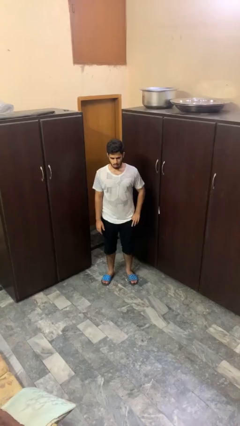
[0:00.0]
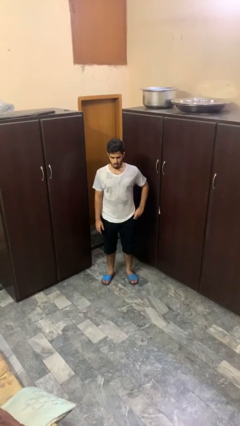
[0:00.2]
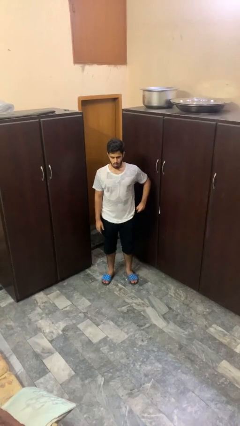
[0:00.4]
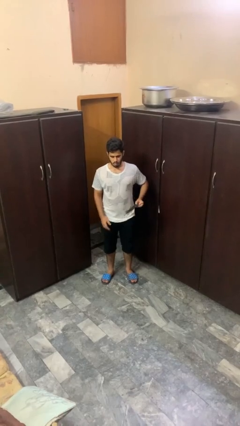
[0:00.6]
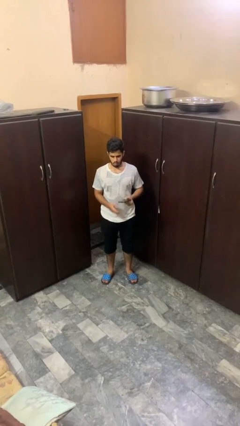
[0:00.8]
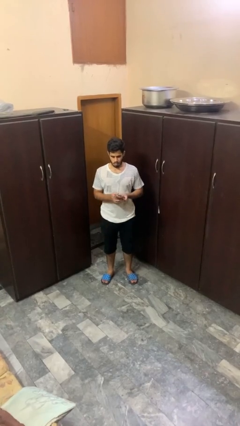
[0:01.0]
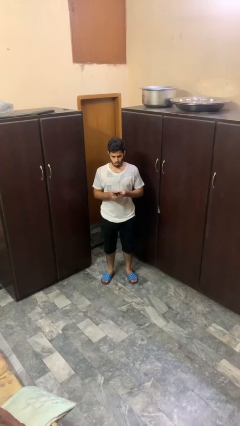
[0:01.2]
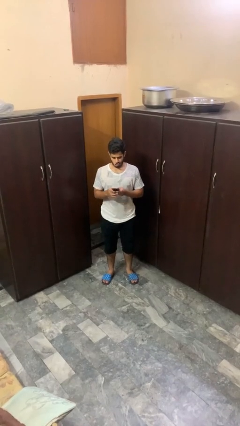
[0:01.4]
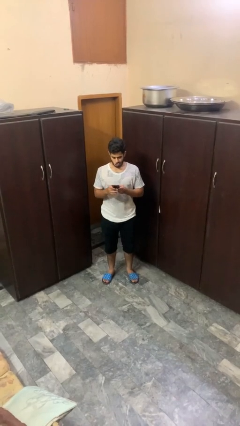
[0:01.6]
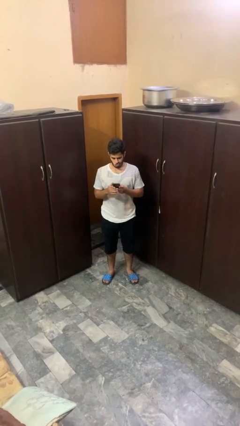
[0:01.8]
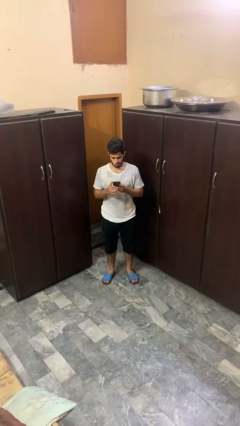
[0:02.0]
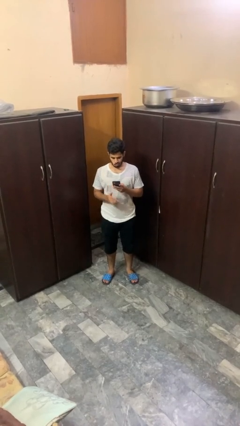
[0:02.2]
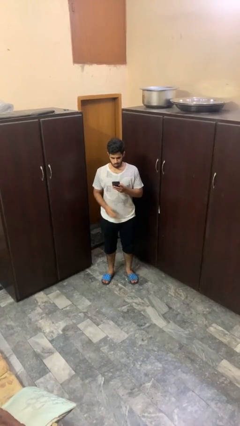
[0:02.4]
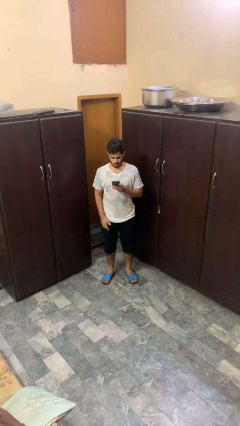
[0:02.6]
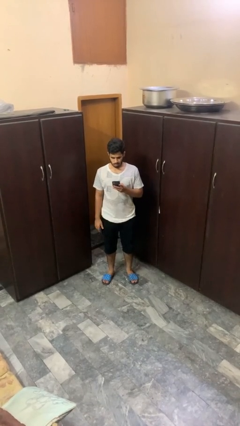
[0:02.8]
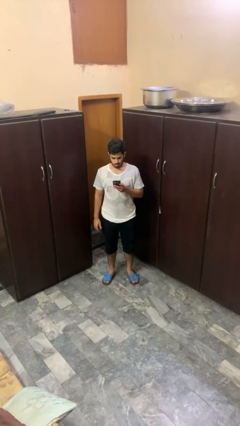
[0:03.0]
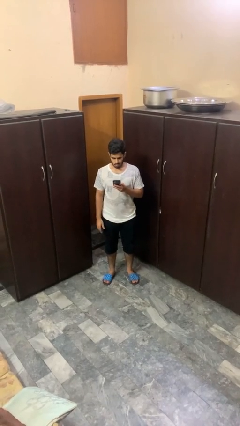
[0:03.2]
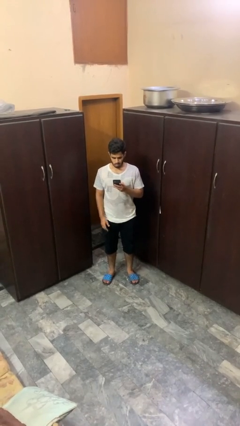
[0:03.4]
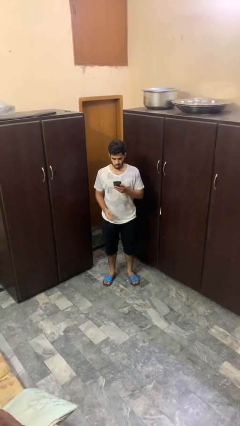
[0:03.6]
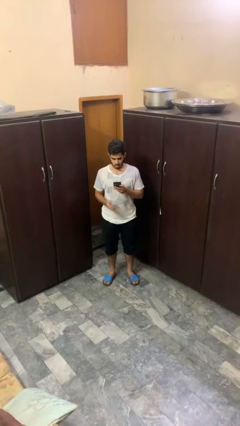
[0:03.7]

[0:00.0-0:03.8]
person takes phone from pocket

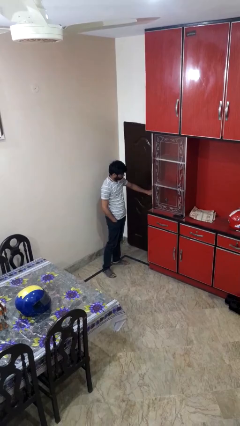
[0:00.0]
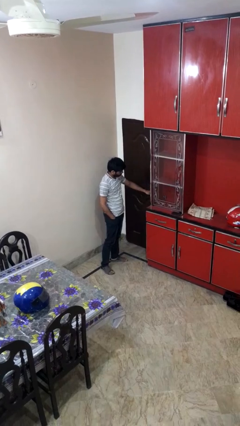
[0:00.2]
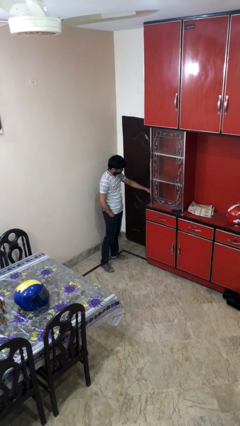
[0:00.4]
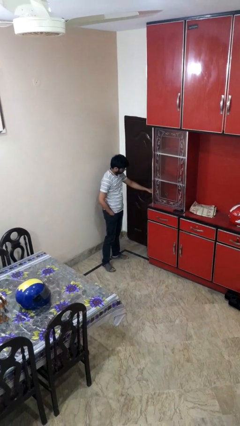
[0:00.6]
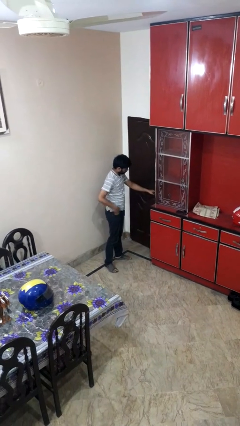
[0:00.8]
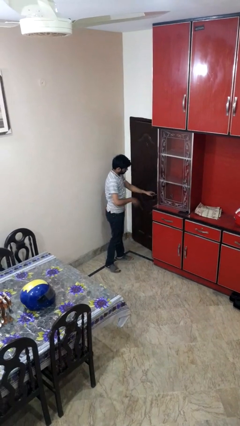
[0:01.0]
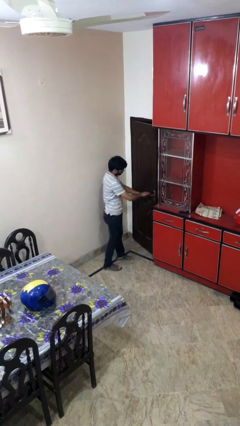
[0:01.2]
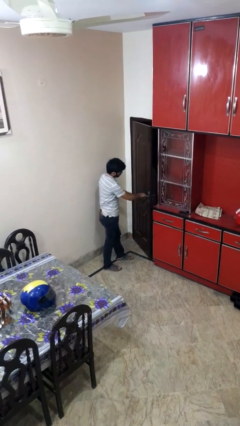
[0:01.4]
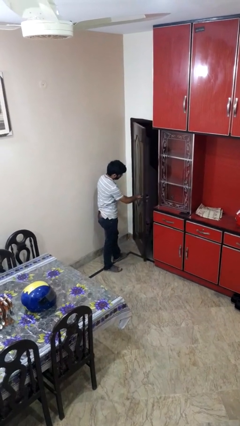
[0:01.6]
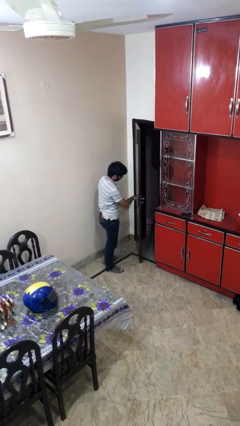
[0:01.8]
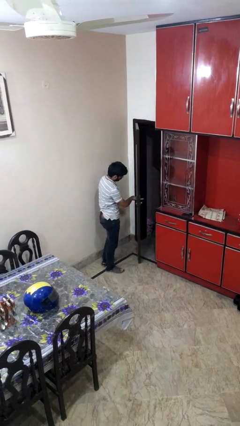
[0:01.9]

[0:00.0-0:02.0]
person opens facility door

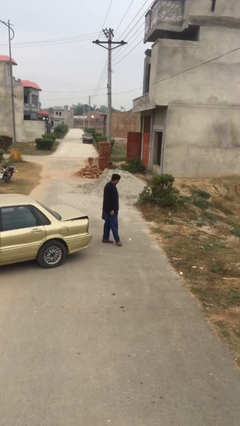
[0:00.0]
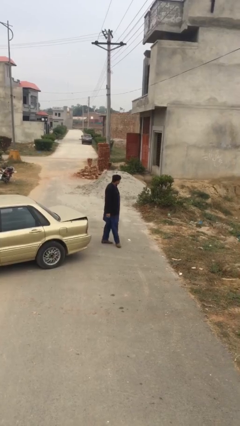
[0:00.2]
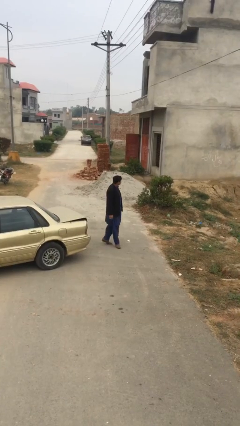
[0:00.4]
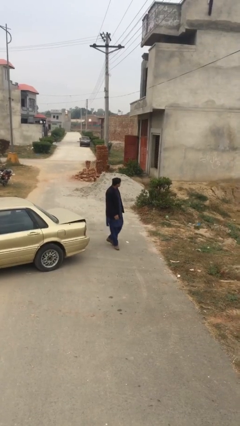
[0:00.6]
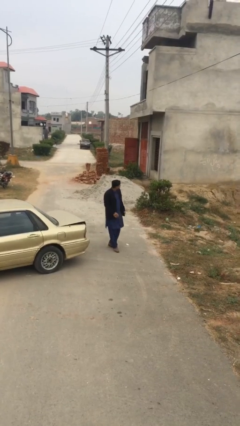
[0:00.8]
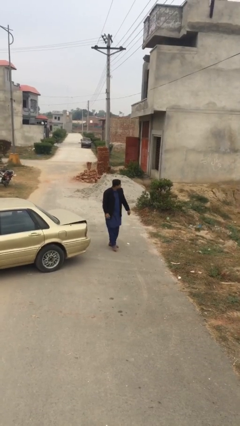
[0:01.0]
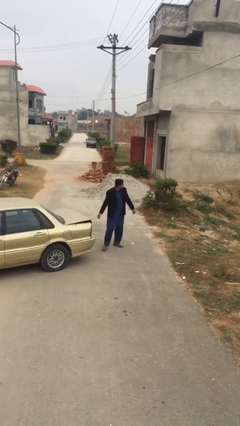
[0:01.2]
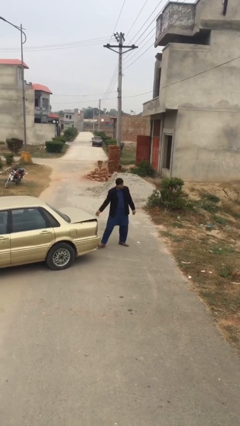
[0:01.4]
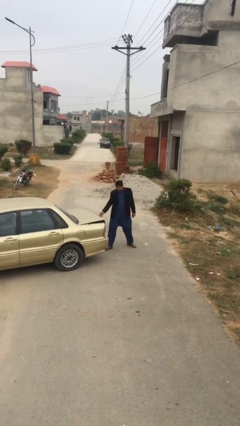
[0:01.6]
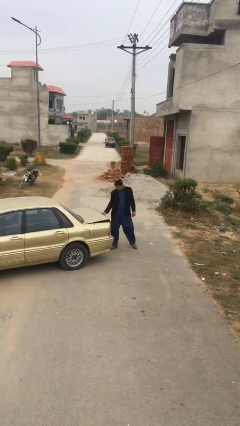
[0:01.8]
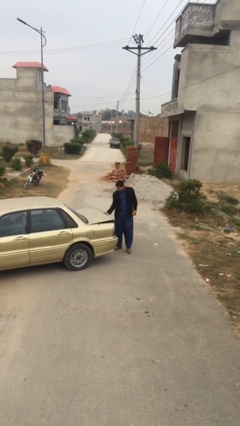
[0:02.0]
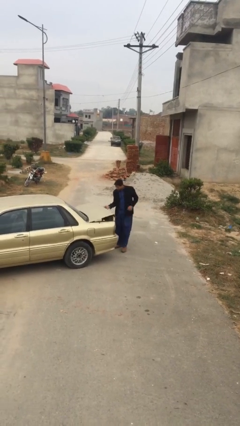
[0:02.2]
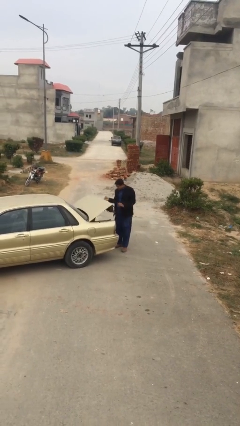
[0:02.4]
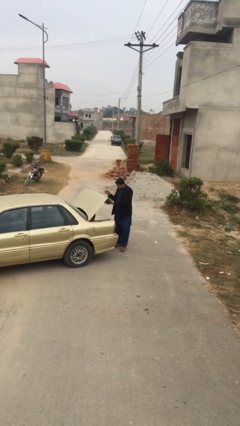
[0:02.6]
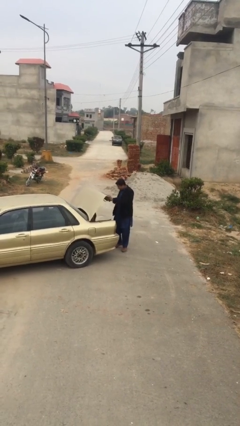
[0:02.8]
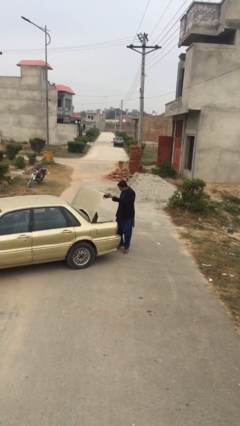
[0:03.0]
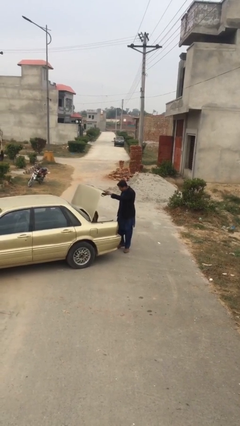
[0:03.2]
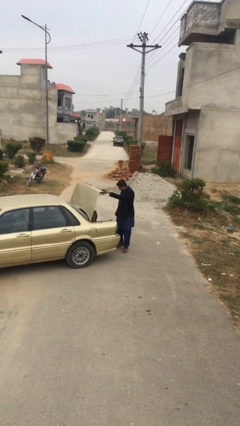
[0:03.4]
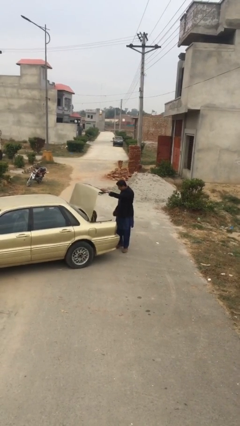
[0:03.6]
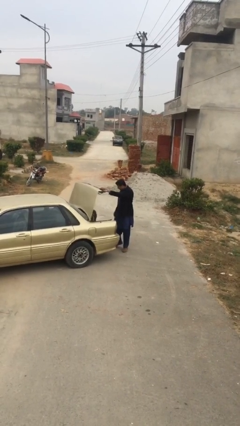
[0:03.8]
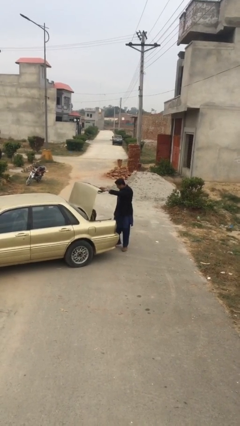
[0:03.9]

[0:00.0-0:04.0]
person opens car trunk

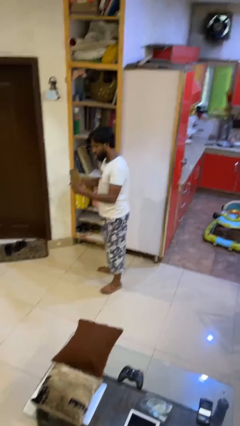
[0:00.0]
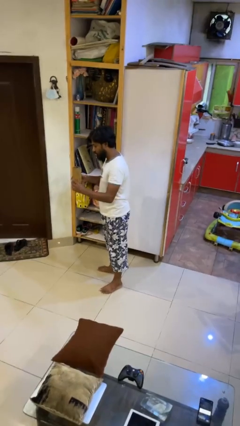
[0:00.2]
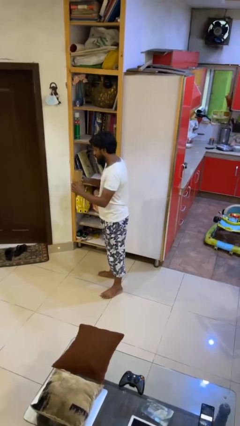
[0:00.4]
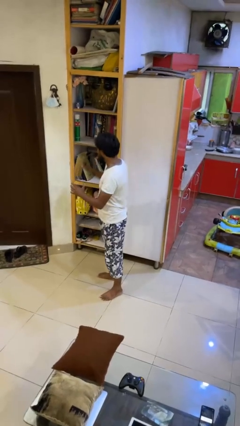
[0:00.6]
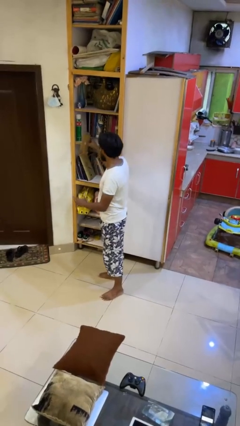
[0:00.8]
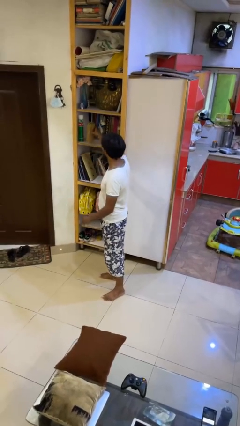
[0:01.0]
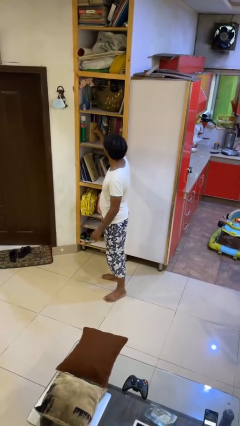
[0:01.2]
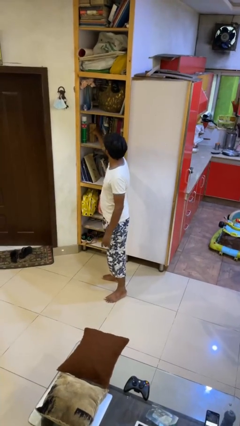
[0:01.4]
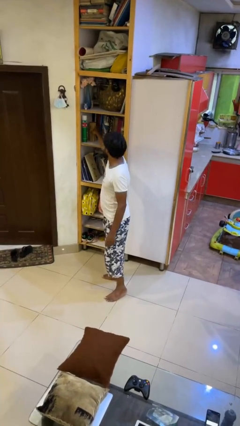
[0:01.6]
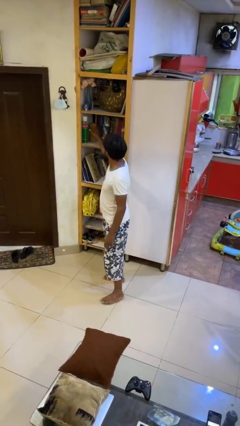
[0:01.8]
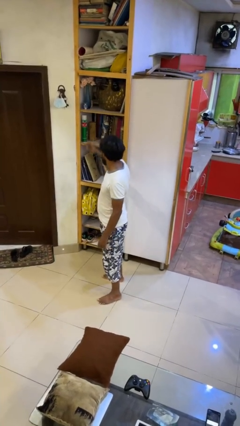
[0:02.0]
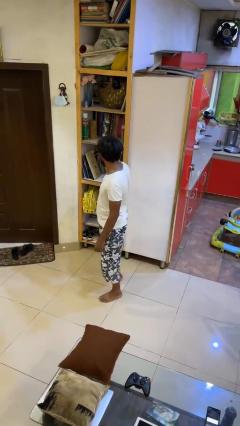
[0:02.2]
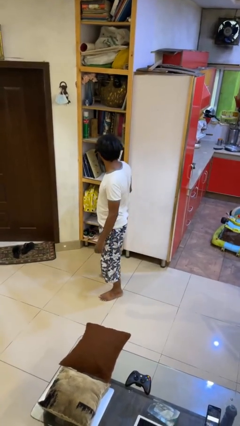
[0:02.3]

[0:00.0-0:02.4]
person puts down object into cabinet

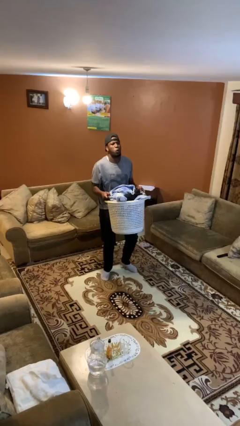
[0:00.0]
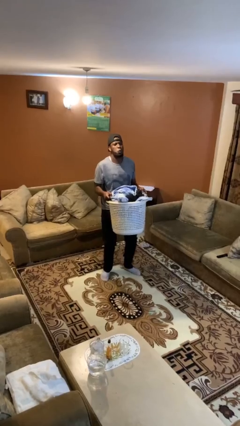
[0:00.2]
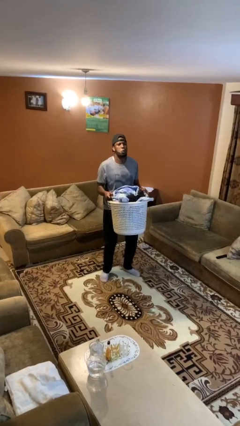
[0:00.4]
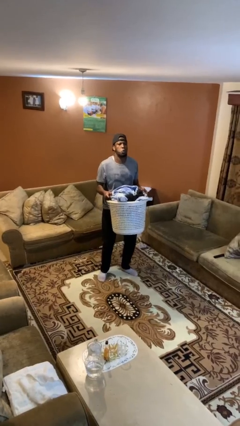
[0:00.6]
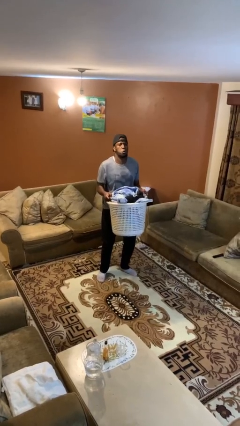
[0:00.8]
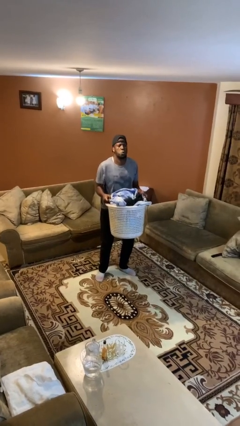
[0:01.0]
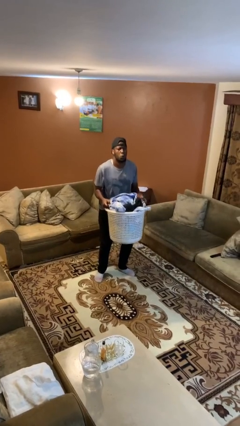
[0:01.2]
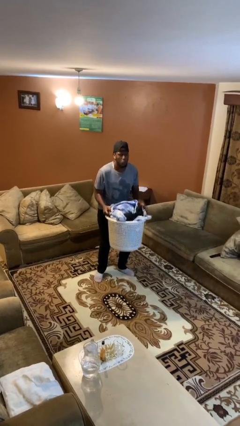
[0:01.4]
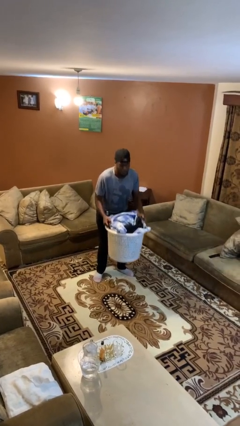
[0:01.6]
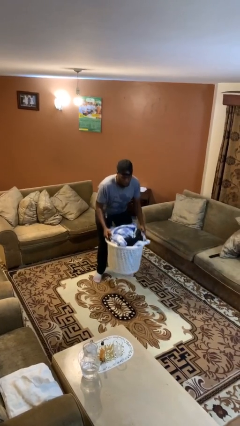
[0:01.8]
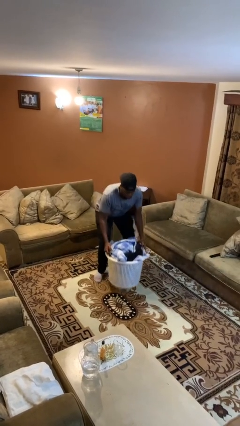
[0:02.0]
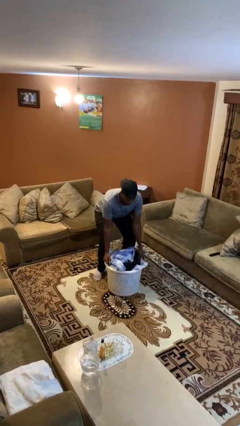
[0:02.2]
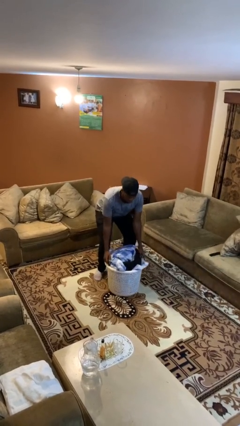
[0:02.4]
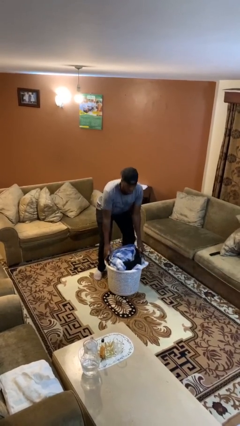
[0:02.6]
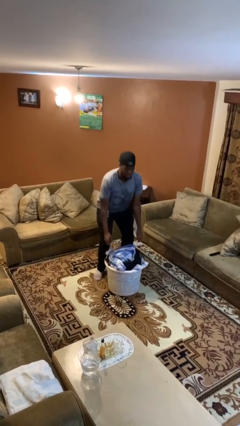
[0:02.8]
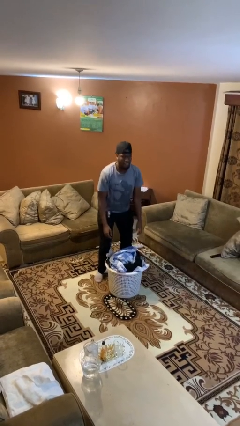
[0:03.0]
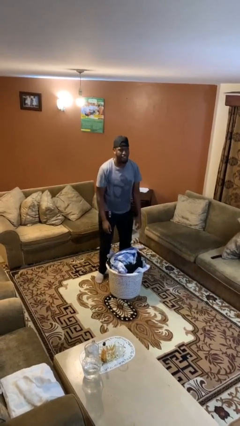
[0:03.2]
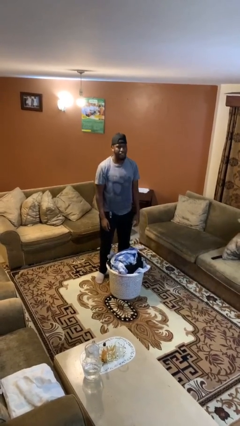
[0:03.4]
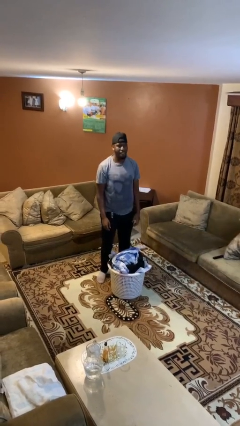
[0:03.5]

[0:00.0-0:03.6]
person puts down object on floor

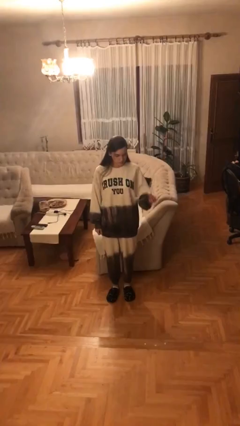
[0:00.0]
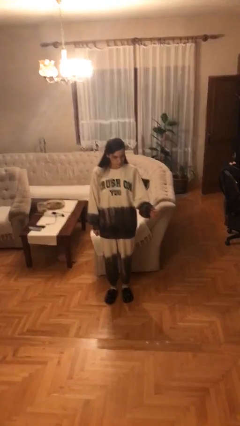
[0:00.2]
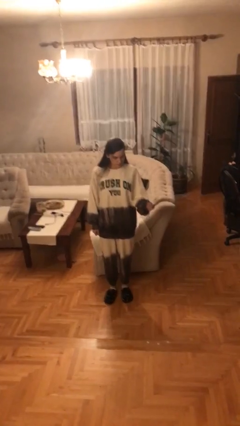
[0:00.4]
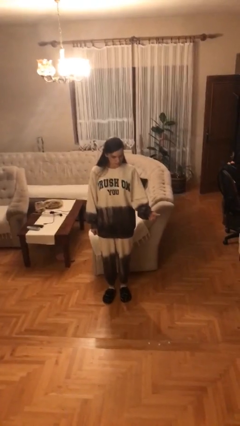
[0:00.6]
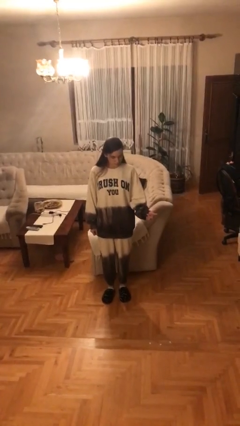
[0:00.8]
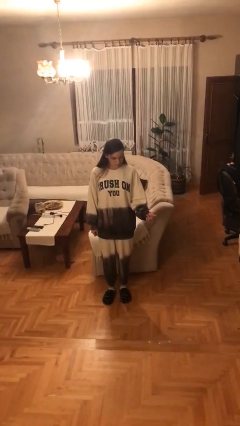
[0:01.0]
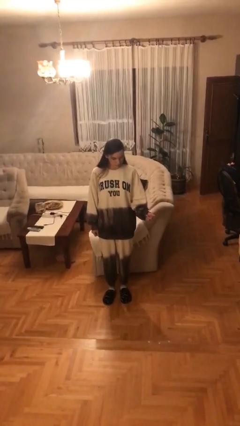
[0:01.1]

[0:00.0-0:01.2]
person snaps fingers

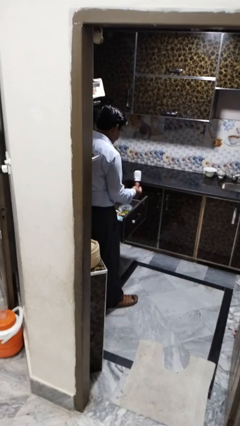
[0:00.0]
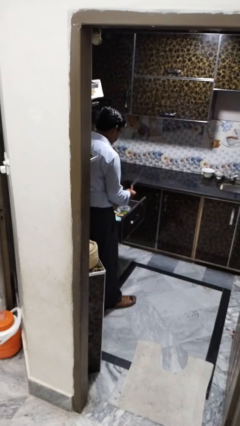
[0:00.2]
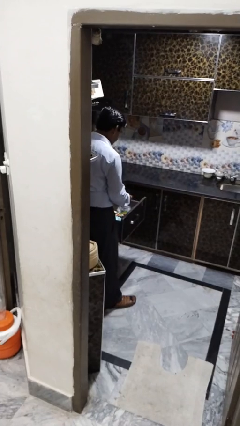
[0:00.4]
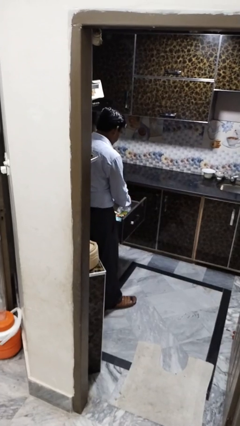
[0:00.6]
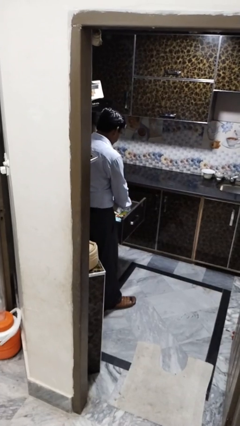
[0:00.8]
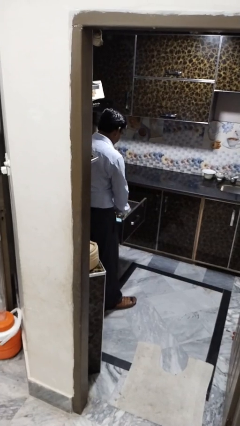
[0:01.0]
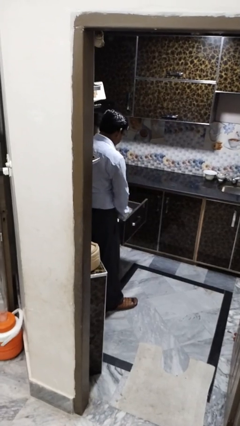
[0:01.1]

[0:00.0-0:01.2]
person puts object into kitchen drawer
